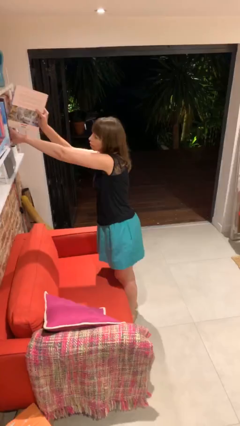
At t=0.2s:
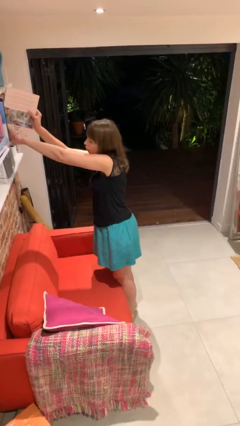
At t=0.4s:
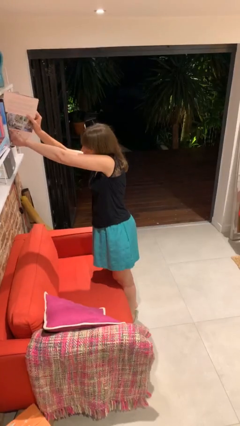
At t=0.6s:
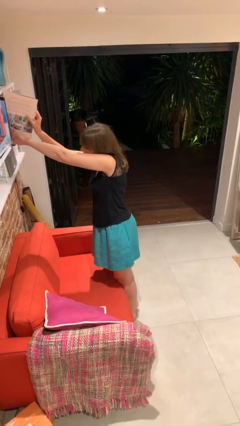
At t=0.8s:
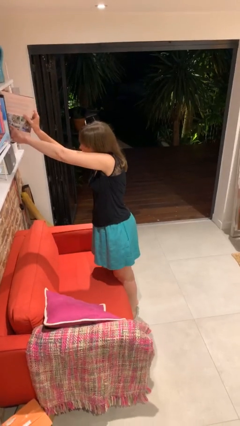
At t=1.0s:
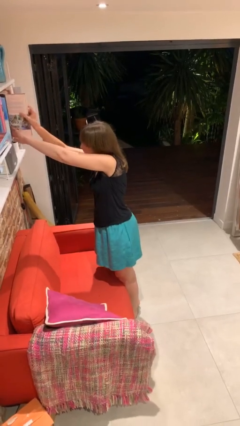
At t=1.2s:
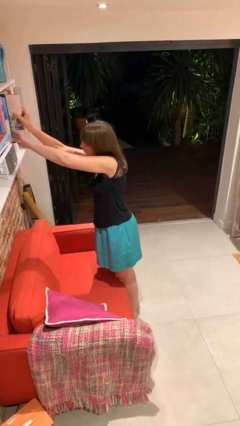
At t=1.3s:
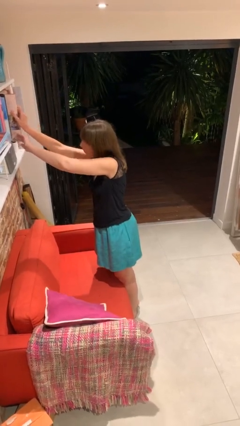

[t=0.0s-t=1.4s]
person puts down object on shelf

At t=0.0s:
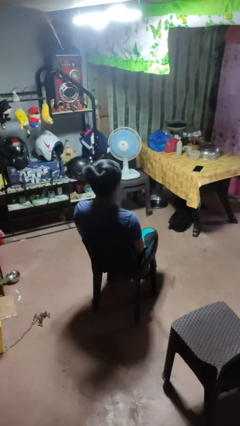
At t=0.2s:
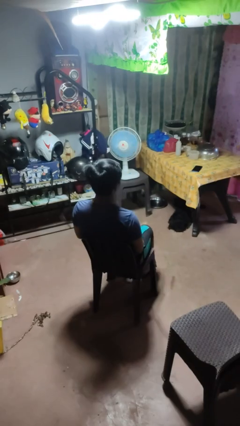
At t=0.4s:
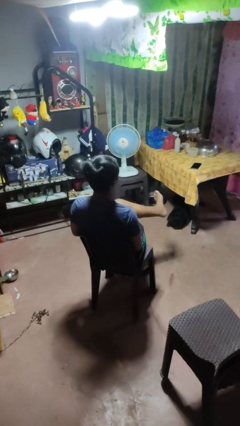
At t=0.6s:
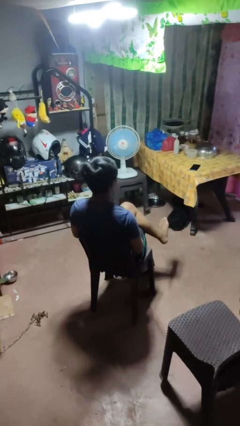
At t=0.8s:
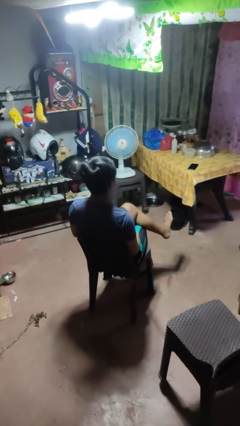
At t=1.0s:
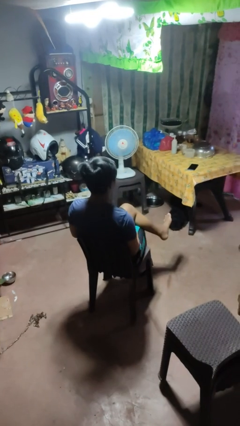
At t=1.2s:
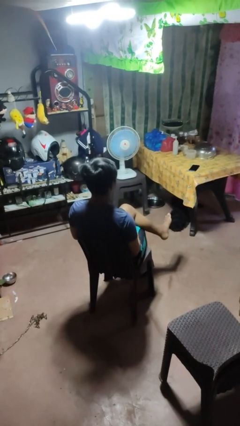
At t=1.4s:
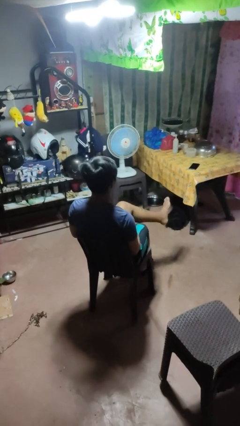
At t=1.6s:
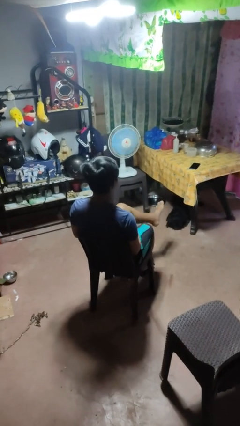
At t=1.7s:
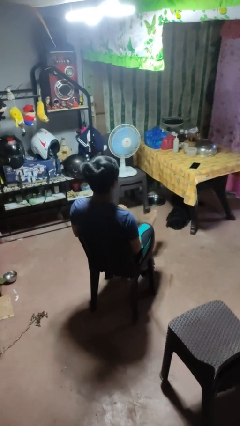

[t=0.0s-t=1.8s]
person crosses legs

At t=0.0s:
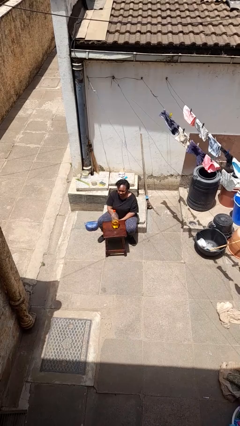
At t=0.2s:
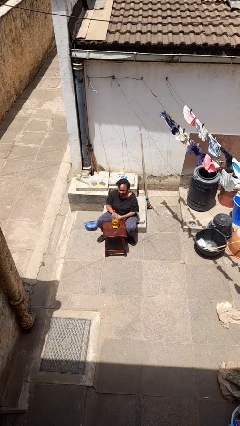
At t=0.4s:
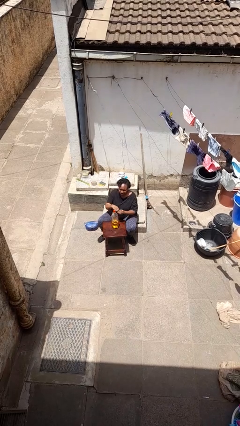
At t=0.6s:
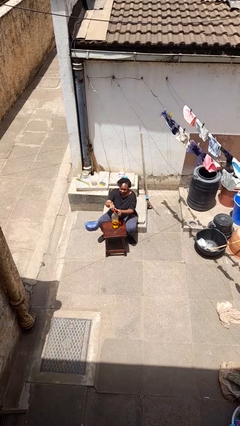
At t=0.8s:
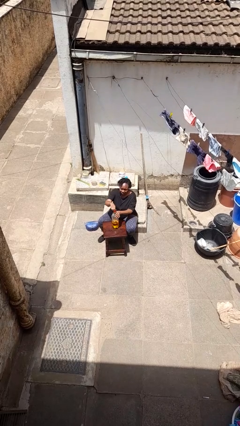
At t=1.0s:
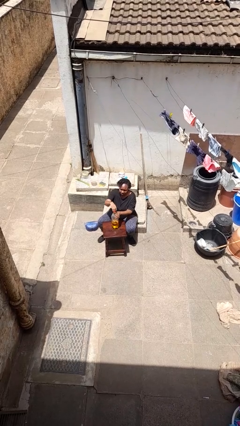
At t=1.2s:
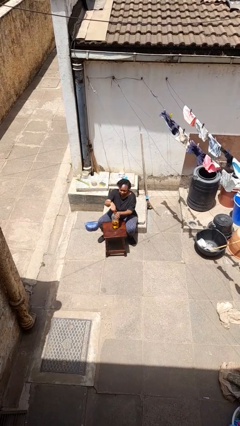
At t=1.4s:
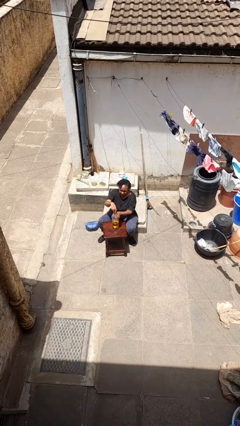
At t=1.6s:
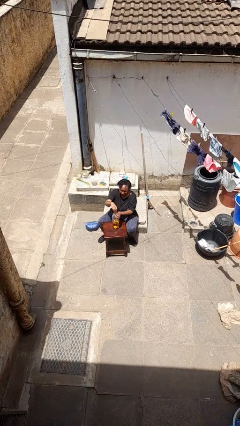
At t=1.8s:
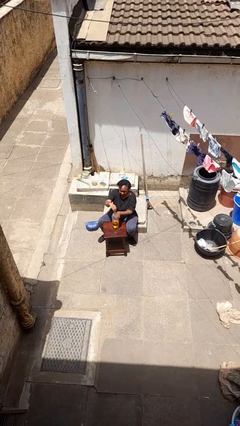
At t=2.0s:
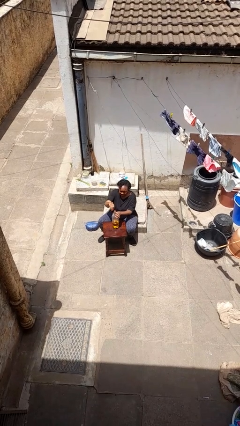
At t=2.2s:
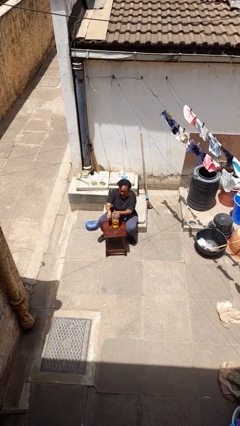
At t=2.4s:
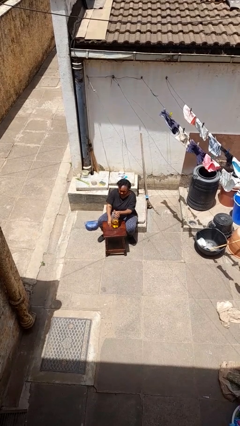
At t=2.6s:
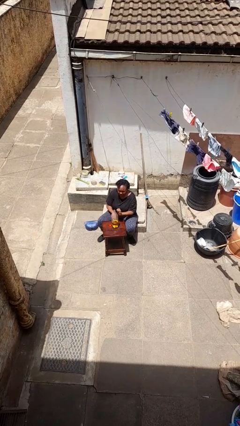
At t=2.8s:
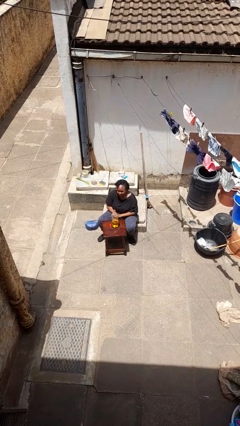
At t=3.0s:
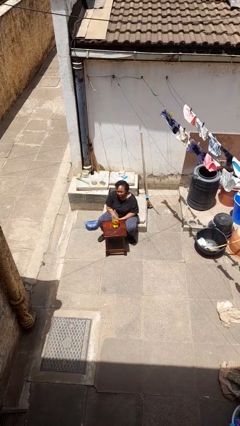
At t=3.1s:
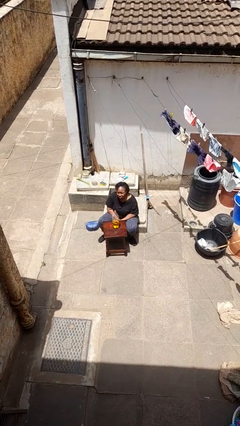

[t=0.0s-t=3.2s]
person unscrews lid from bottle

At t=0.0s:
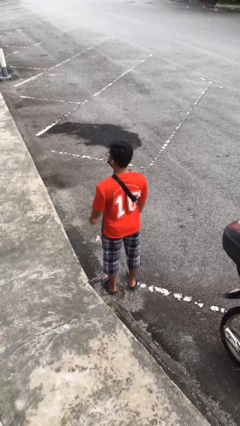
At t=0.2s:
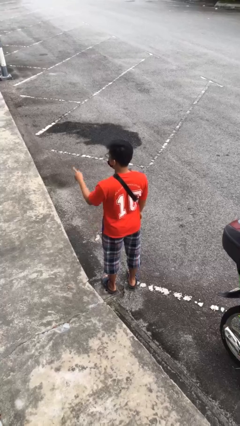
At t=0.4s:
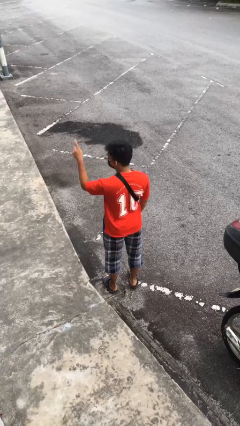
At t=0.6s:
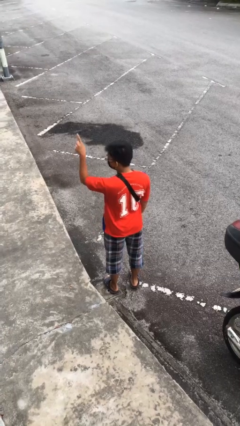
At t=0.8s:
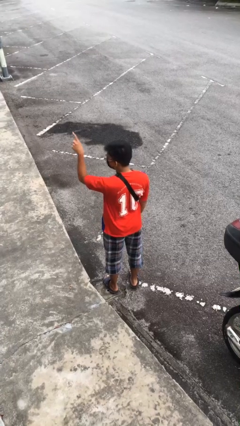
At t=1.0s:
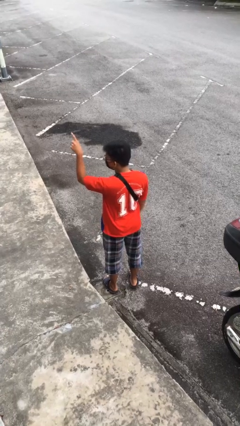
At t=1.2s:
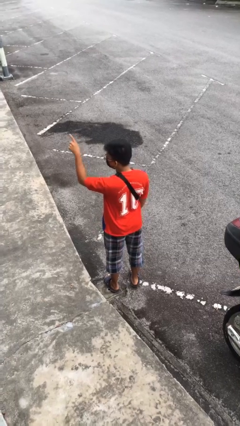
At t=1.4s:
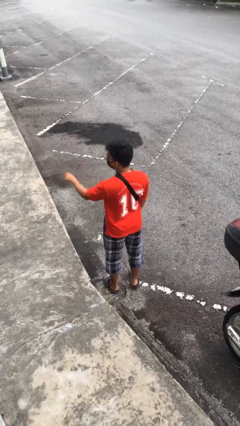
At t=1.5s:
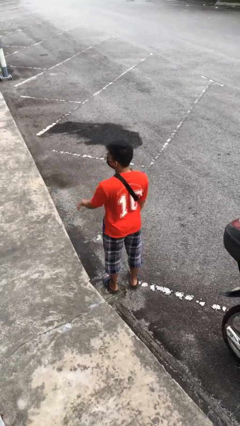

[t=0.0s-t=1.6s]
person points at person

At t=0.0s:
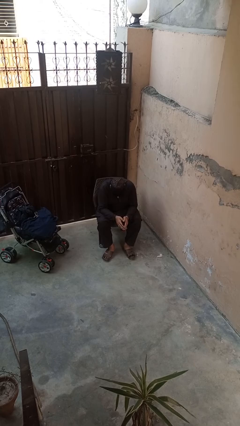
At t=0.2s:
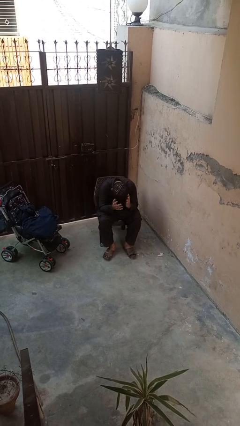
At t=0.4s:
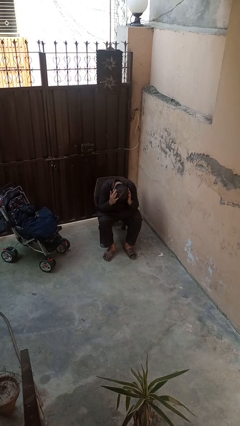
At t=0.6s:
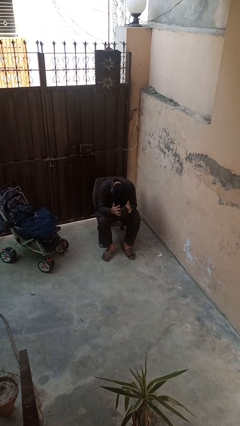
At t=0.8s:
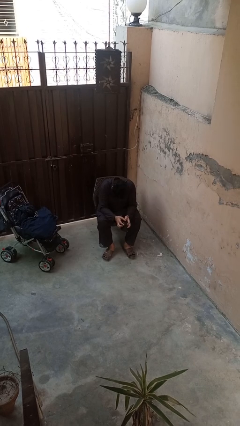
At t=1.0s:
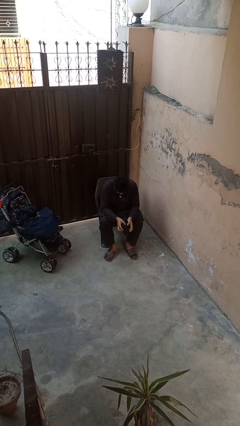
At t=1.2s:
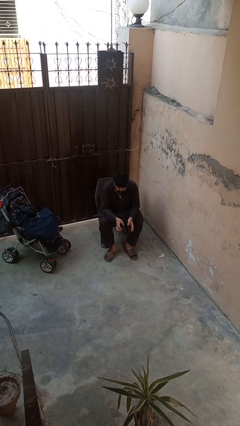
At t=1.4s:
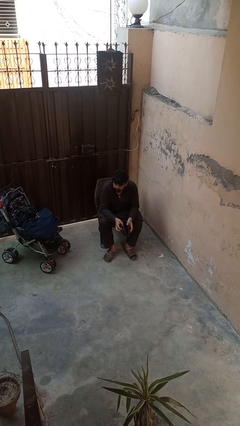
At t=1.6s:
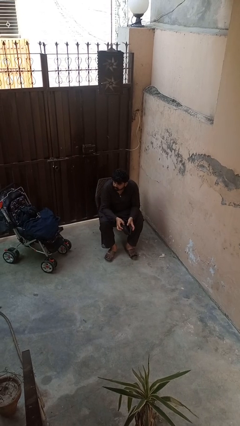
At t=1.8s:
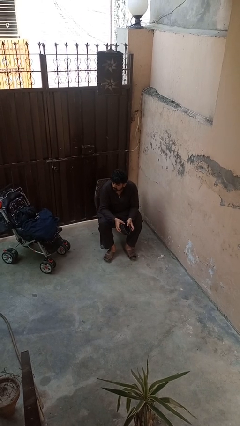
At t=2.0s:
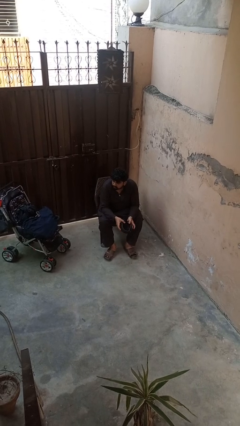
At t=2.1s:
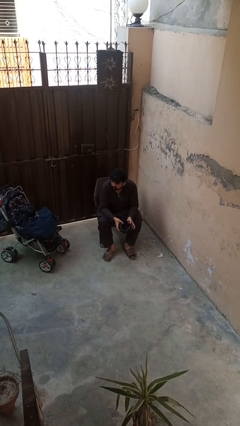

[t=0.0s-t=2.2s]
person takes off hat

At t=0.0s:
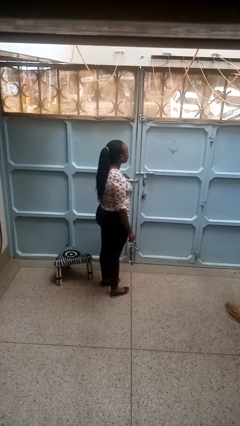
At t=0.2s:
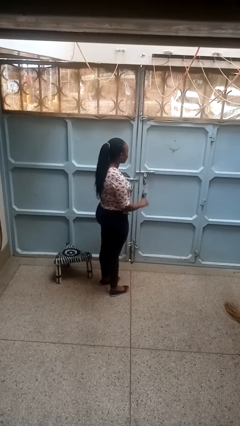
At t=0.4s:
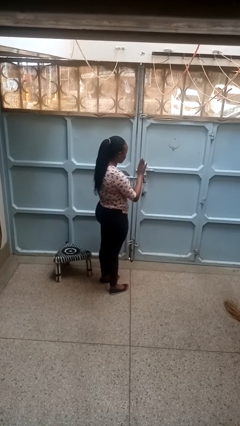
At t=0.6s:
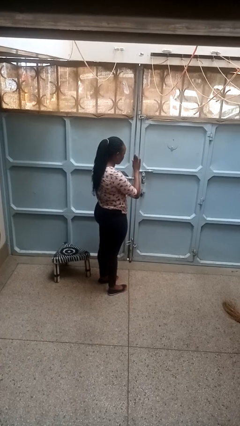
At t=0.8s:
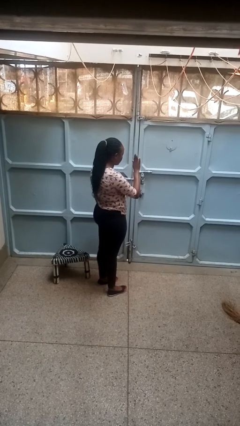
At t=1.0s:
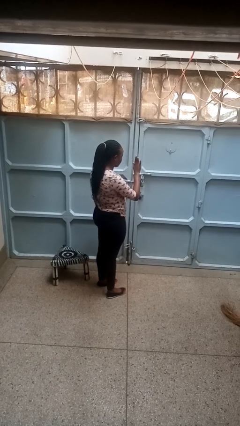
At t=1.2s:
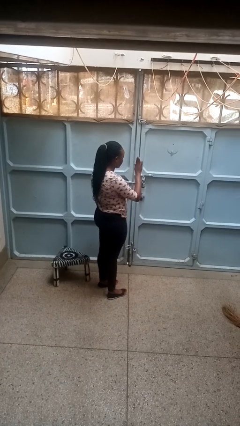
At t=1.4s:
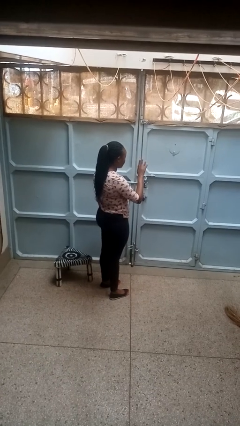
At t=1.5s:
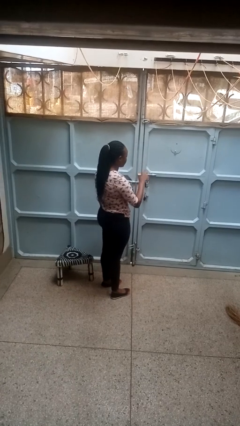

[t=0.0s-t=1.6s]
person gestures stop

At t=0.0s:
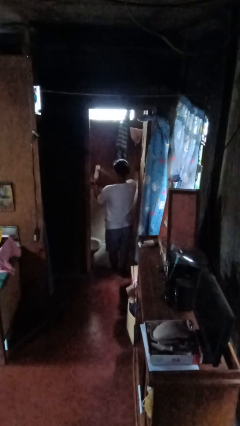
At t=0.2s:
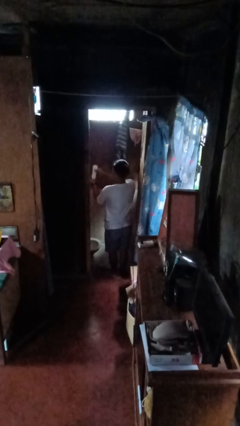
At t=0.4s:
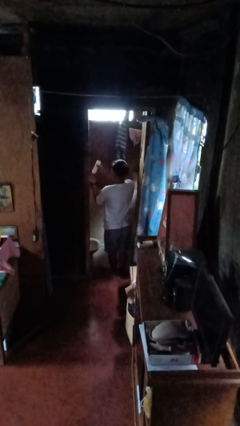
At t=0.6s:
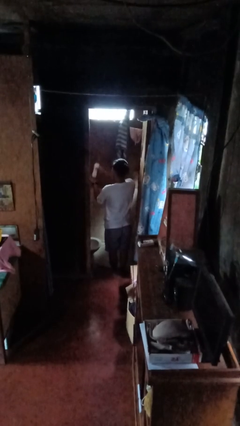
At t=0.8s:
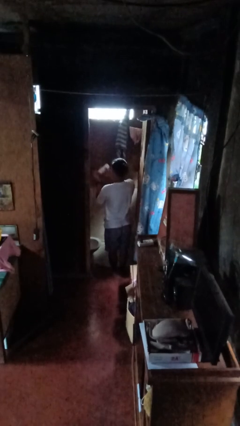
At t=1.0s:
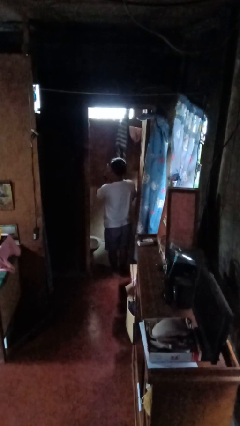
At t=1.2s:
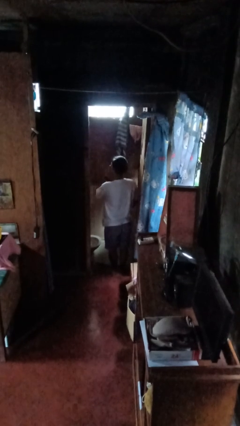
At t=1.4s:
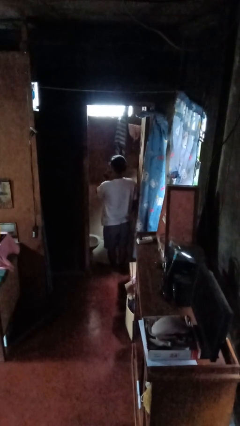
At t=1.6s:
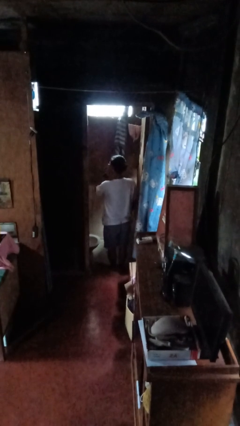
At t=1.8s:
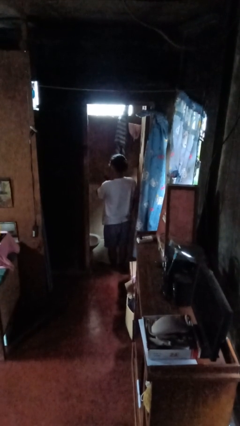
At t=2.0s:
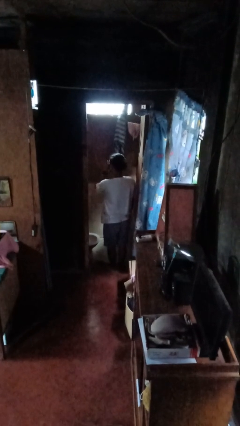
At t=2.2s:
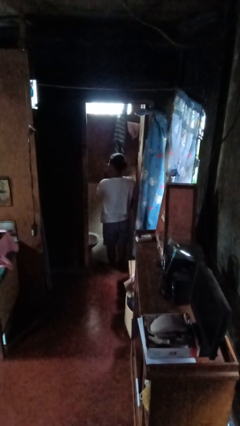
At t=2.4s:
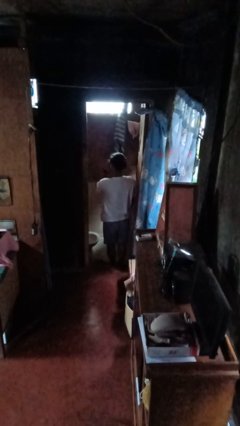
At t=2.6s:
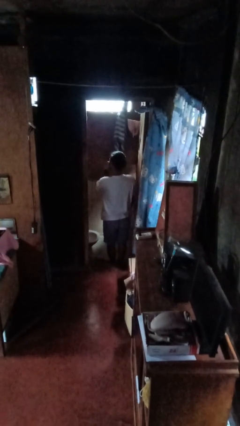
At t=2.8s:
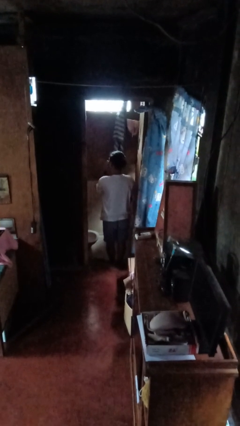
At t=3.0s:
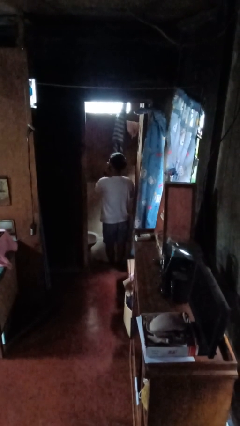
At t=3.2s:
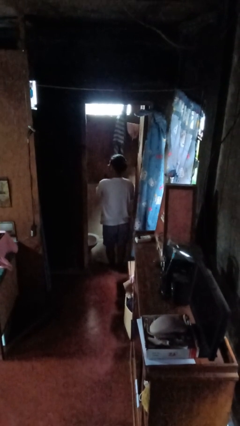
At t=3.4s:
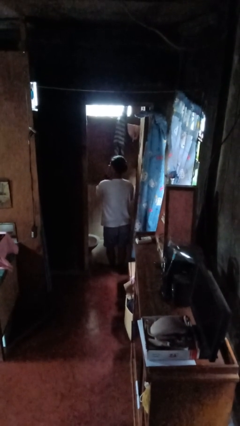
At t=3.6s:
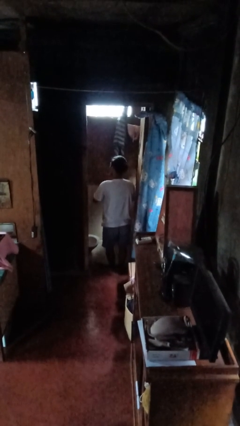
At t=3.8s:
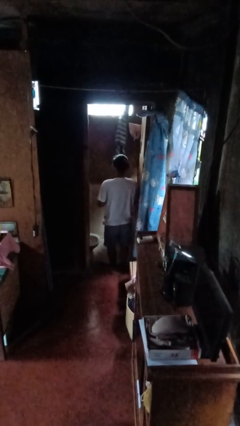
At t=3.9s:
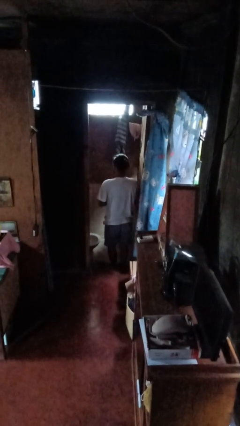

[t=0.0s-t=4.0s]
person applies shaving cream

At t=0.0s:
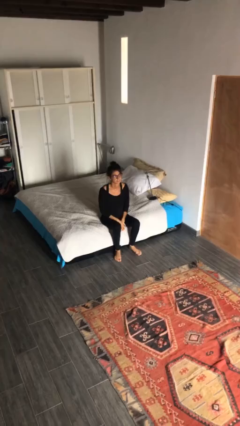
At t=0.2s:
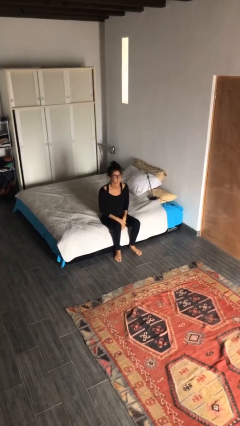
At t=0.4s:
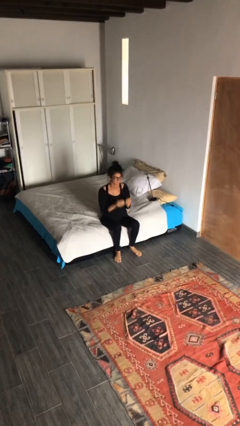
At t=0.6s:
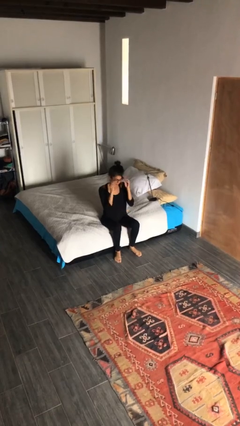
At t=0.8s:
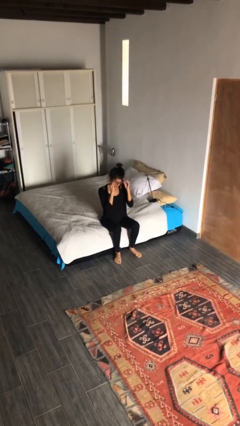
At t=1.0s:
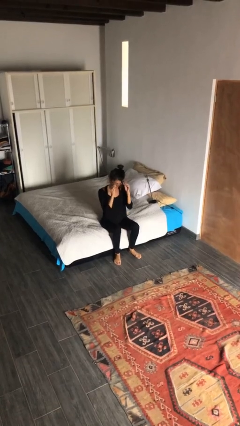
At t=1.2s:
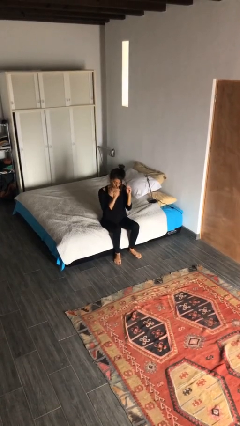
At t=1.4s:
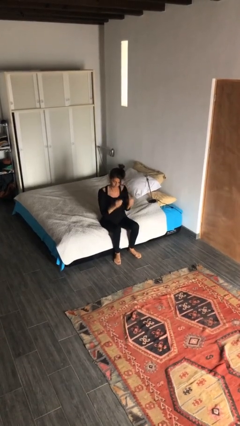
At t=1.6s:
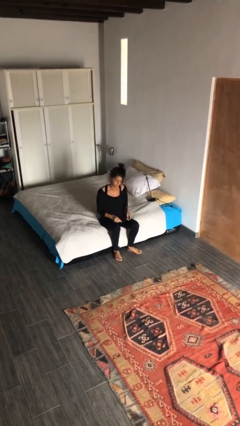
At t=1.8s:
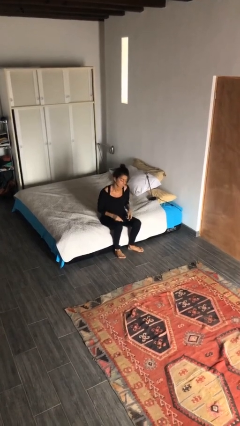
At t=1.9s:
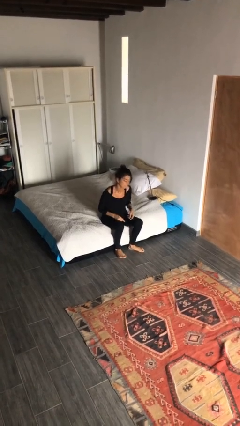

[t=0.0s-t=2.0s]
person takes off glasses
